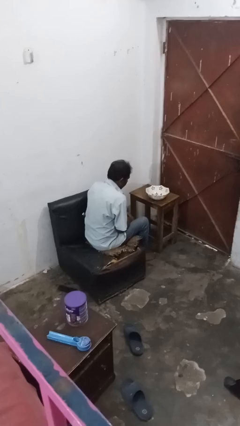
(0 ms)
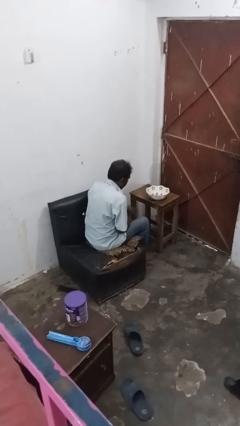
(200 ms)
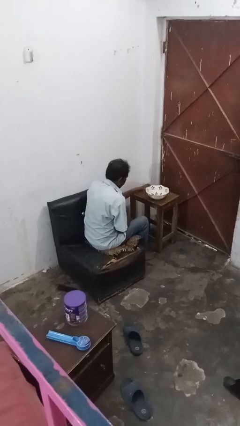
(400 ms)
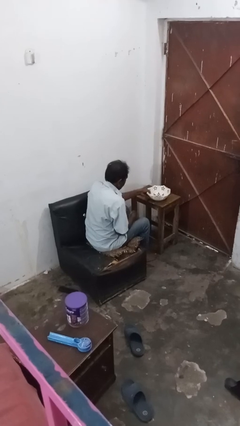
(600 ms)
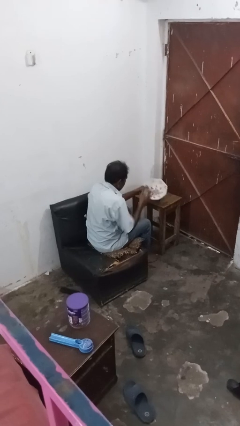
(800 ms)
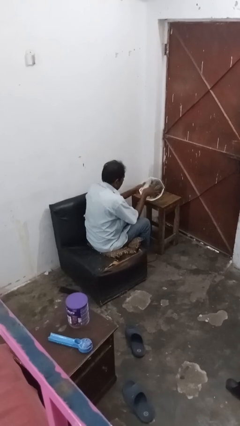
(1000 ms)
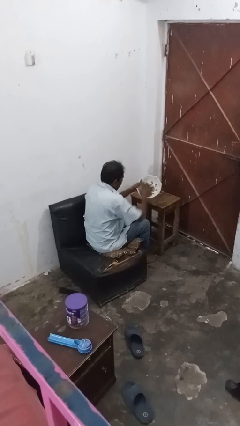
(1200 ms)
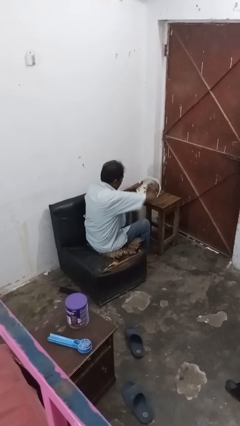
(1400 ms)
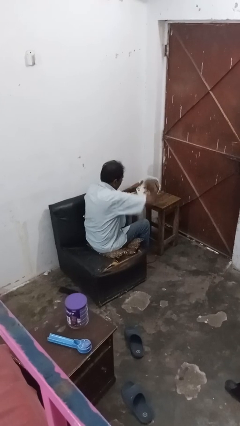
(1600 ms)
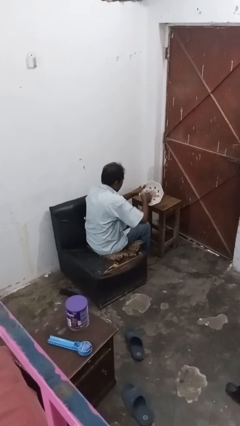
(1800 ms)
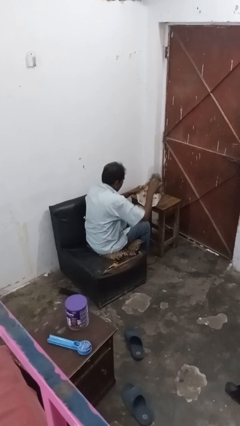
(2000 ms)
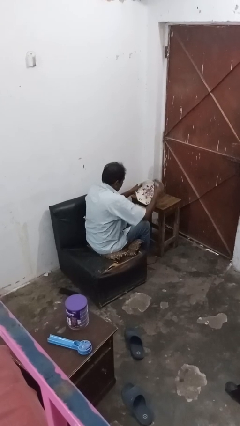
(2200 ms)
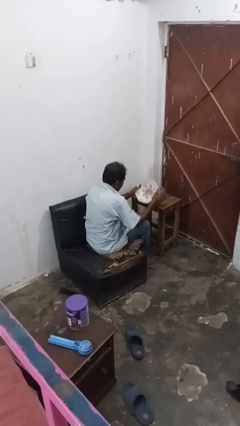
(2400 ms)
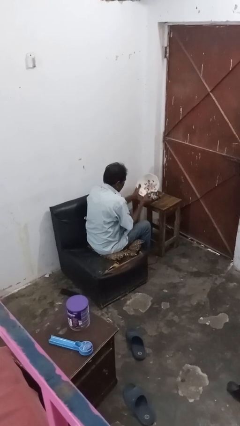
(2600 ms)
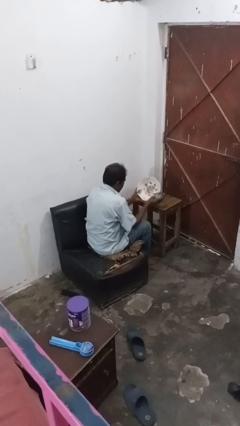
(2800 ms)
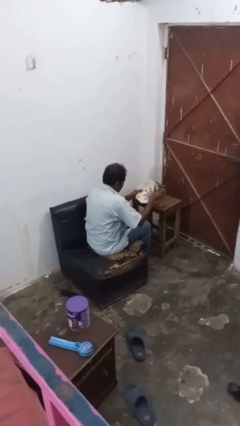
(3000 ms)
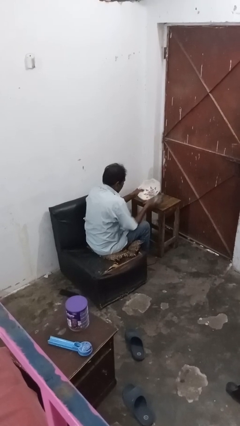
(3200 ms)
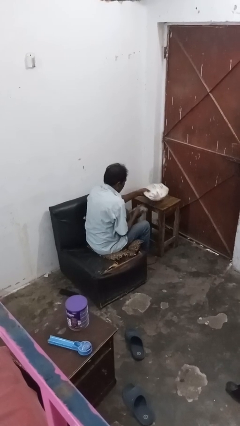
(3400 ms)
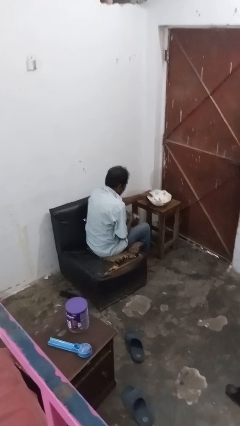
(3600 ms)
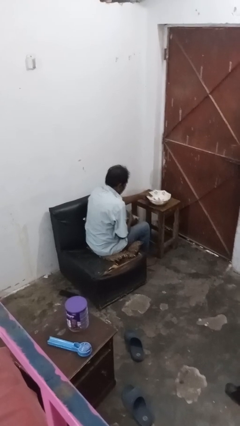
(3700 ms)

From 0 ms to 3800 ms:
person dries dish

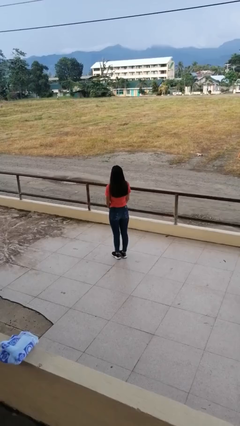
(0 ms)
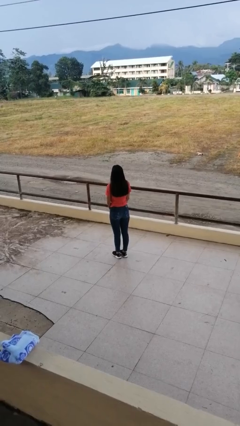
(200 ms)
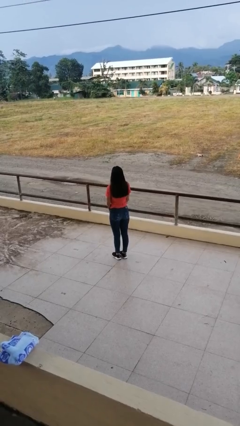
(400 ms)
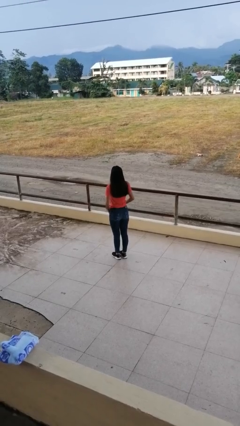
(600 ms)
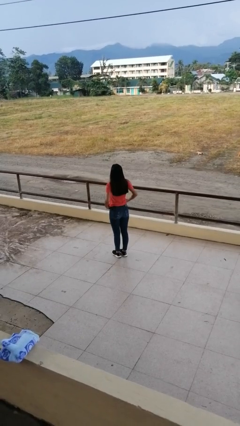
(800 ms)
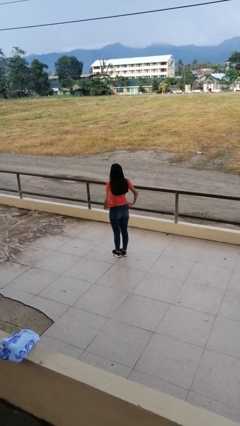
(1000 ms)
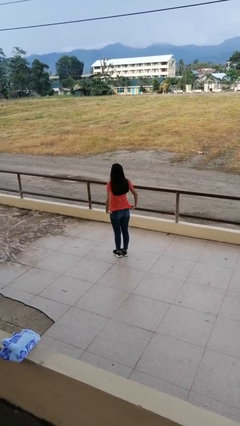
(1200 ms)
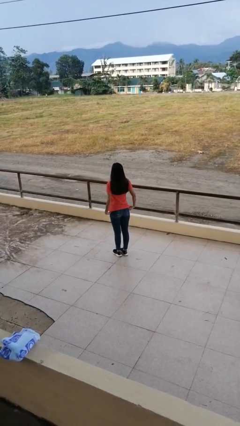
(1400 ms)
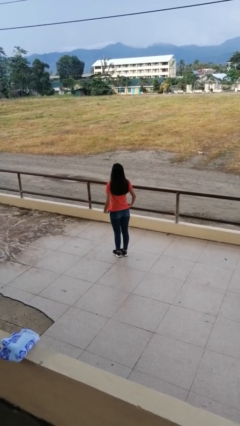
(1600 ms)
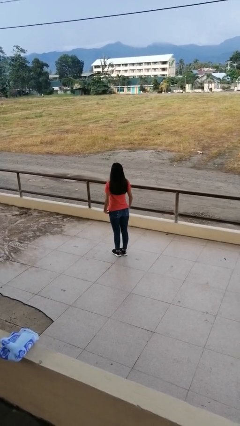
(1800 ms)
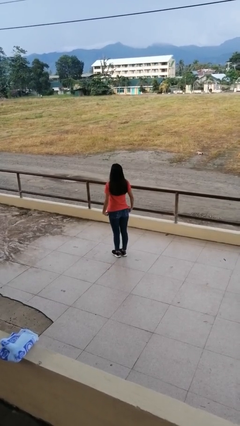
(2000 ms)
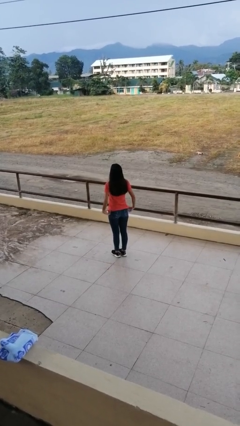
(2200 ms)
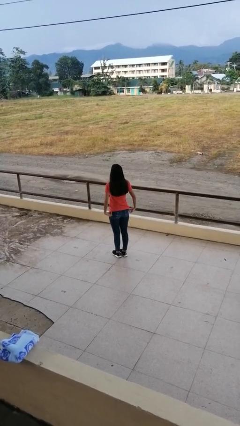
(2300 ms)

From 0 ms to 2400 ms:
person untucks shirt

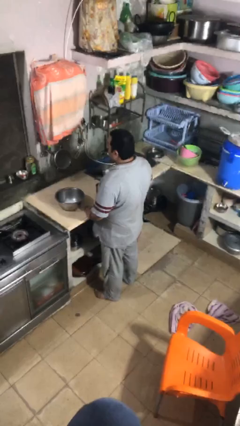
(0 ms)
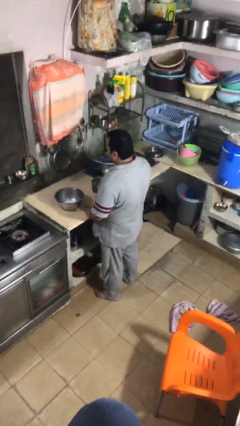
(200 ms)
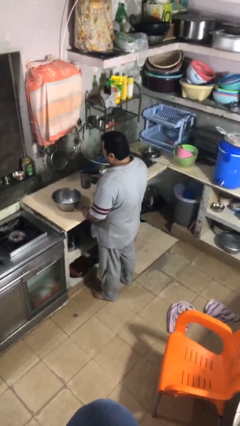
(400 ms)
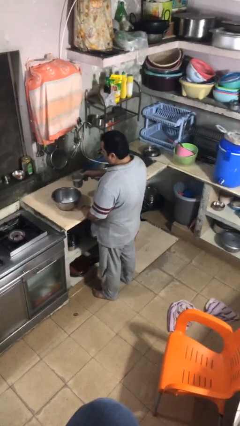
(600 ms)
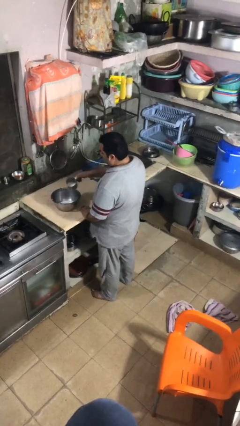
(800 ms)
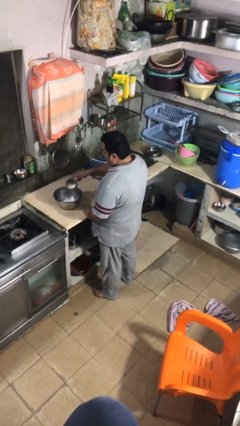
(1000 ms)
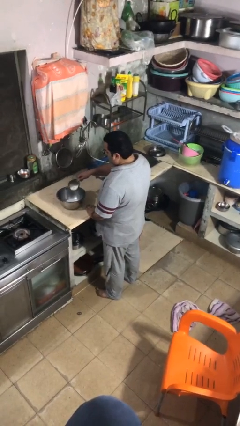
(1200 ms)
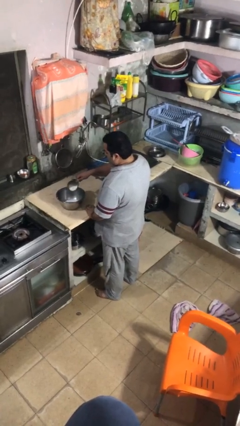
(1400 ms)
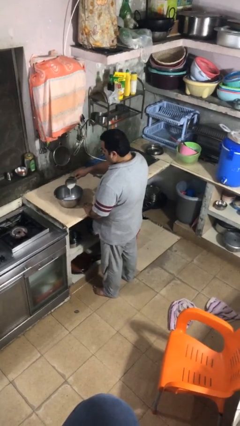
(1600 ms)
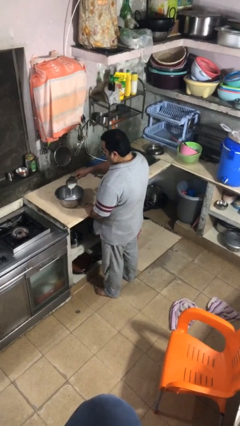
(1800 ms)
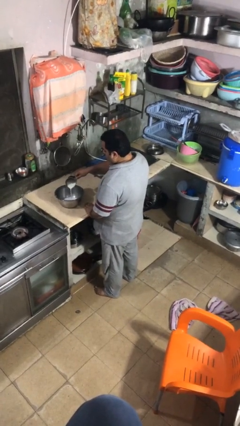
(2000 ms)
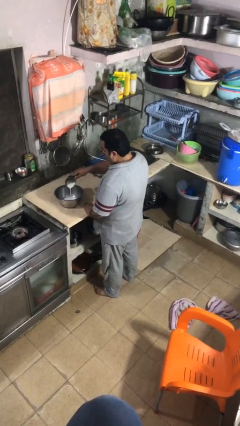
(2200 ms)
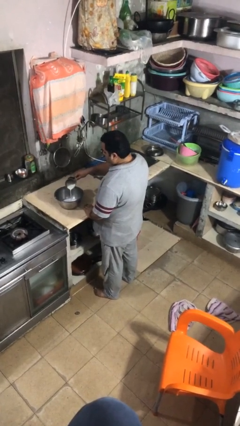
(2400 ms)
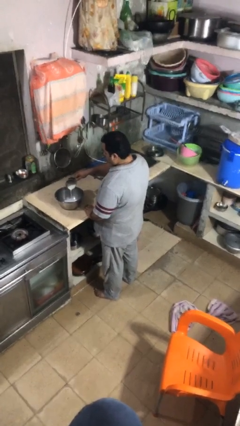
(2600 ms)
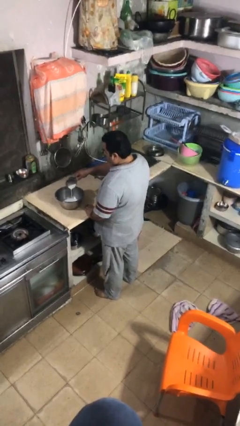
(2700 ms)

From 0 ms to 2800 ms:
person pours into bowl

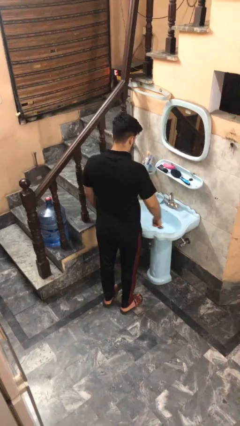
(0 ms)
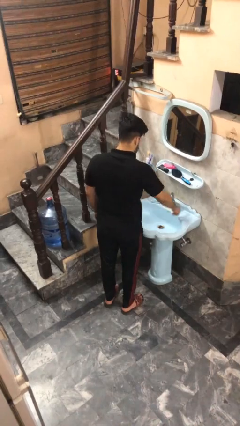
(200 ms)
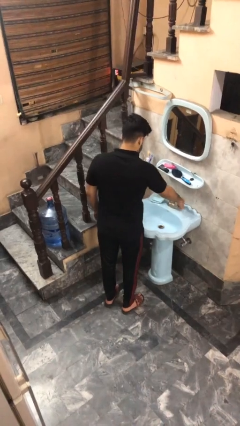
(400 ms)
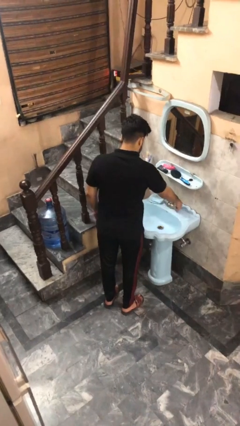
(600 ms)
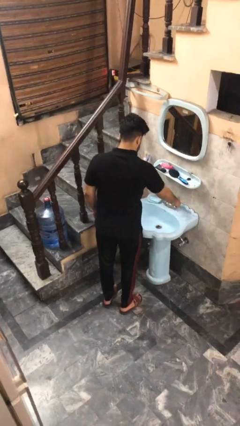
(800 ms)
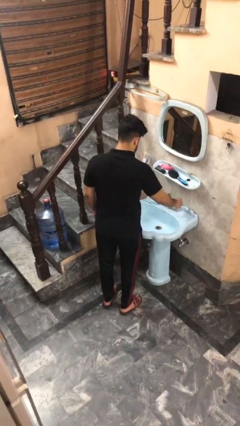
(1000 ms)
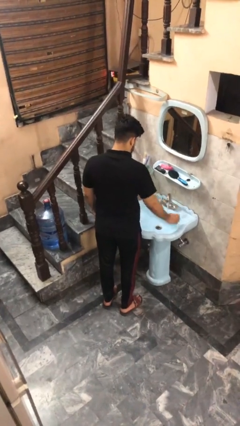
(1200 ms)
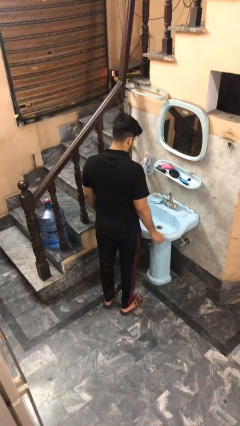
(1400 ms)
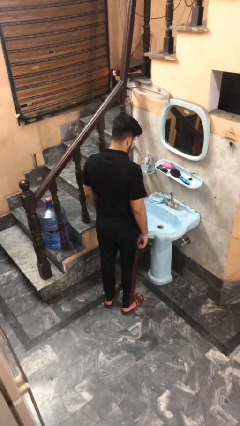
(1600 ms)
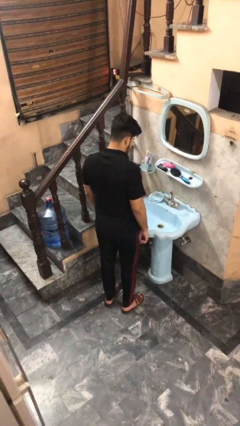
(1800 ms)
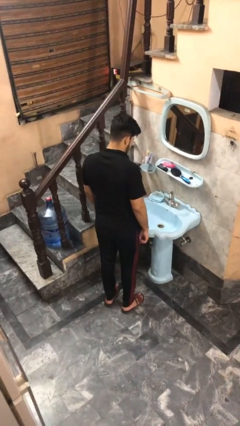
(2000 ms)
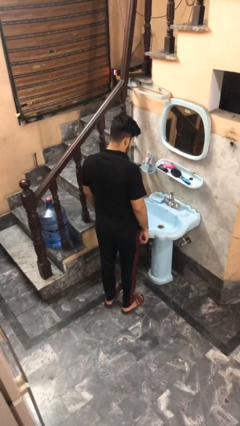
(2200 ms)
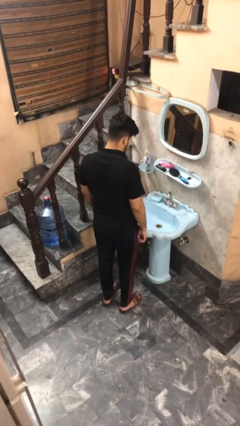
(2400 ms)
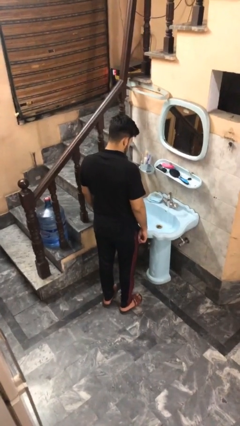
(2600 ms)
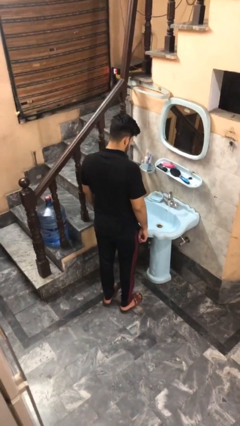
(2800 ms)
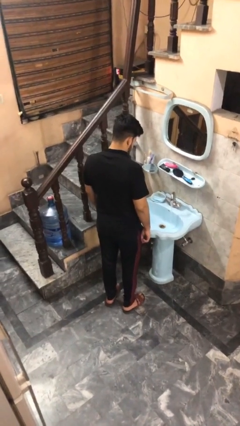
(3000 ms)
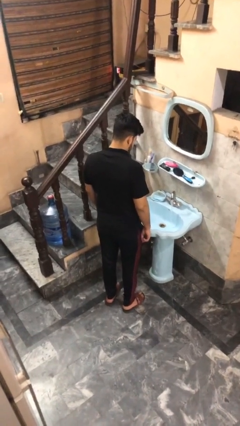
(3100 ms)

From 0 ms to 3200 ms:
person turns on faucet

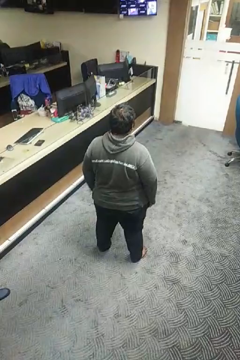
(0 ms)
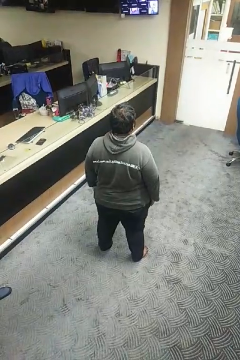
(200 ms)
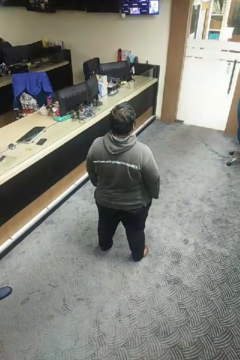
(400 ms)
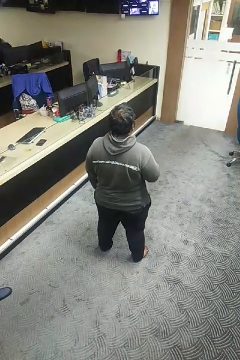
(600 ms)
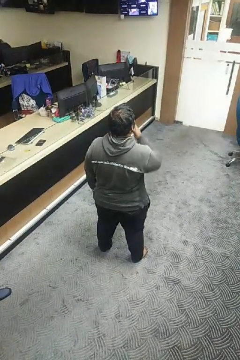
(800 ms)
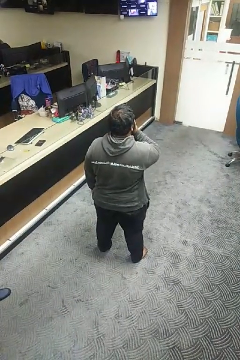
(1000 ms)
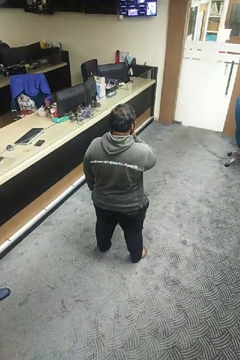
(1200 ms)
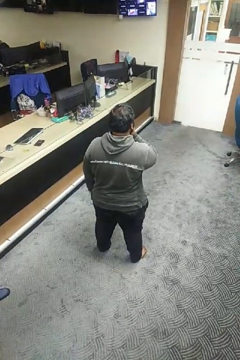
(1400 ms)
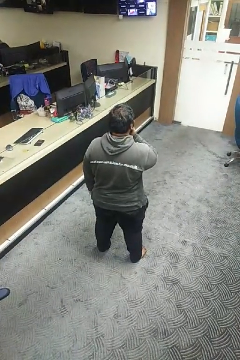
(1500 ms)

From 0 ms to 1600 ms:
person sneezes into hand

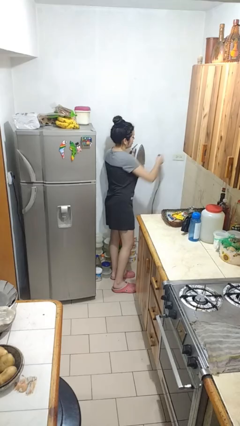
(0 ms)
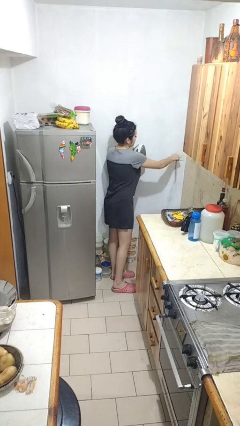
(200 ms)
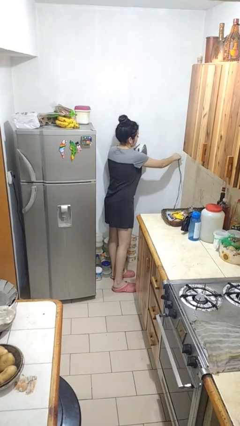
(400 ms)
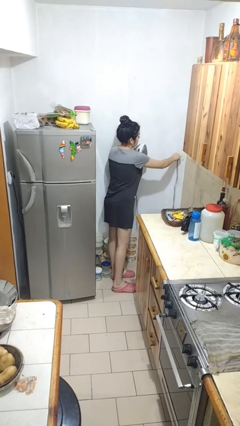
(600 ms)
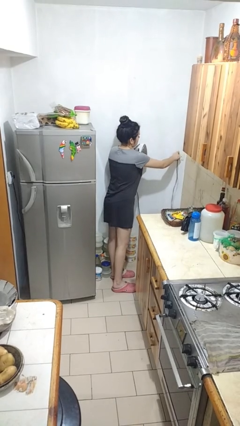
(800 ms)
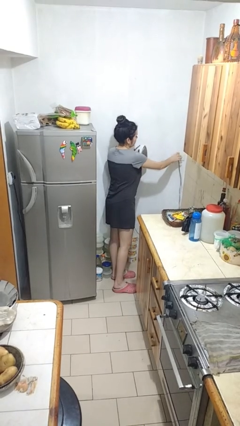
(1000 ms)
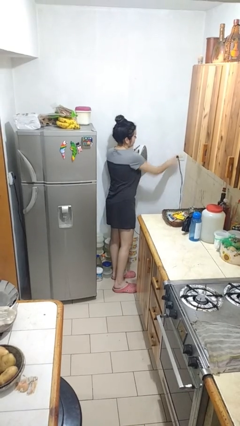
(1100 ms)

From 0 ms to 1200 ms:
person plugs into electrical socket

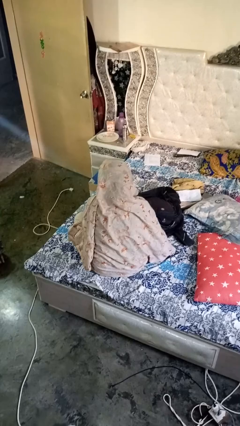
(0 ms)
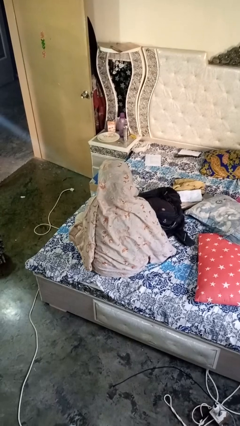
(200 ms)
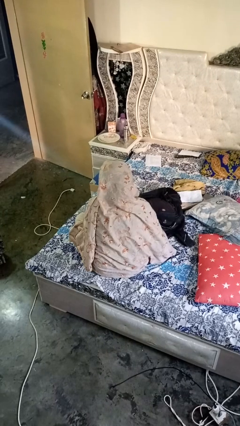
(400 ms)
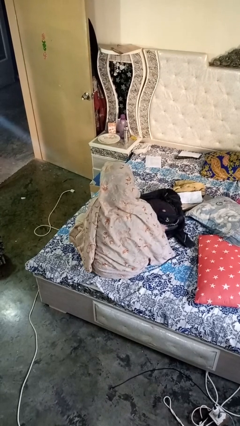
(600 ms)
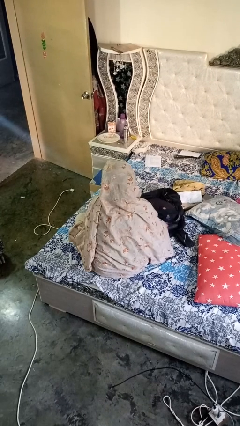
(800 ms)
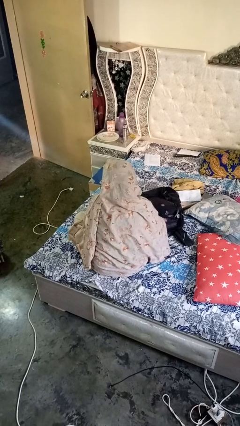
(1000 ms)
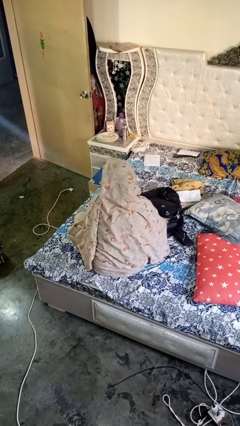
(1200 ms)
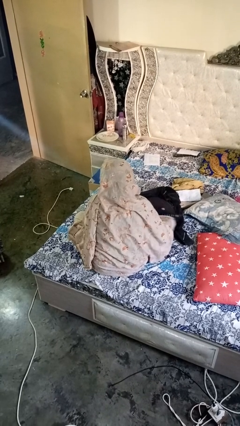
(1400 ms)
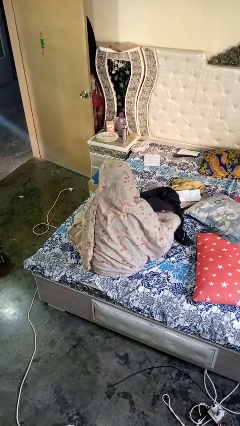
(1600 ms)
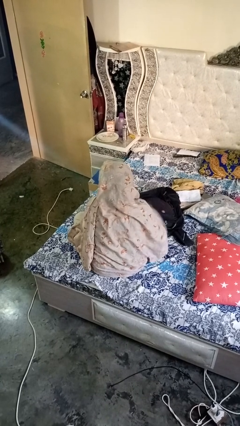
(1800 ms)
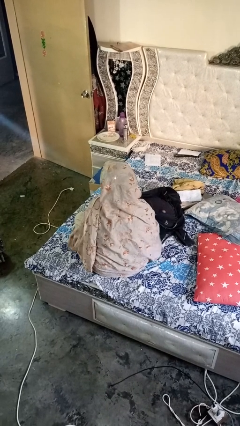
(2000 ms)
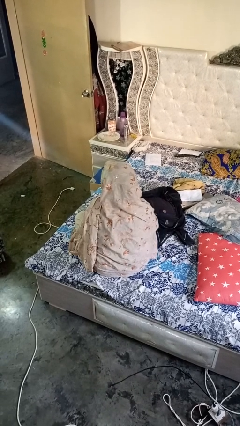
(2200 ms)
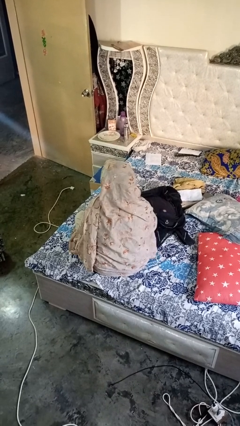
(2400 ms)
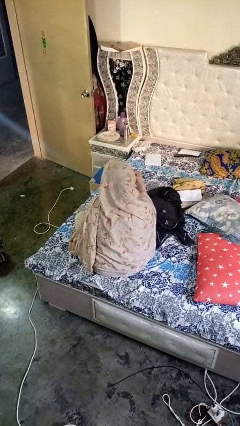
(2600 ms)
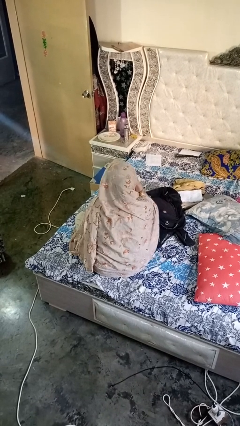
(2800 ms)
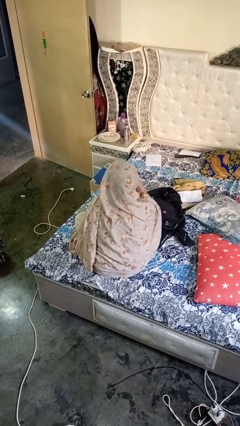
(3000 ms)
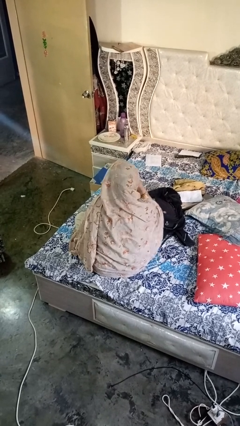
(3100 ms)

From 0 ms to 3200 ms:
person eats snack from bag
